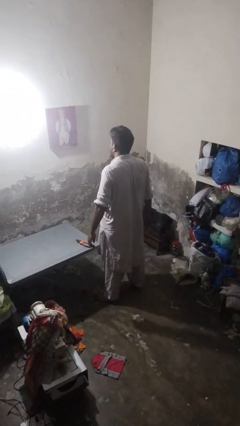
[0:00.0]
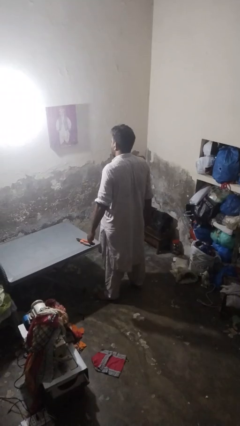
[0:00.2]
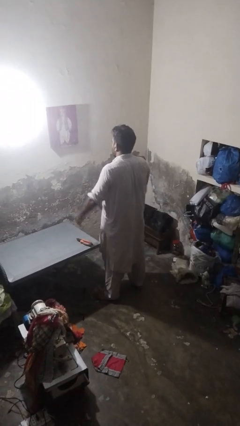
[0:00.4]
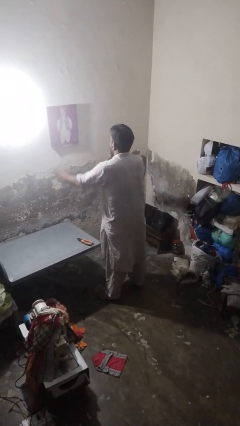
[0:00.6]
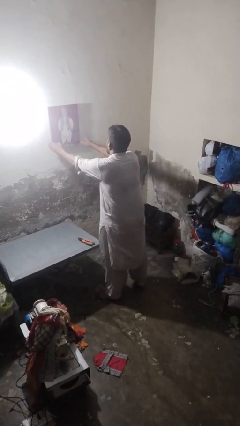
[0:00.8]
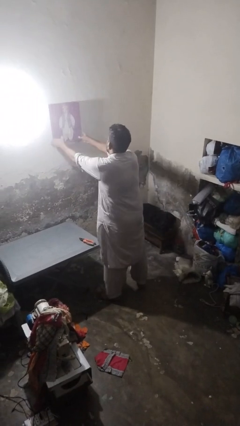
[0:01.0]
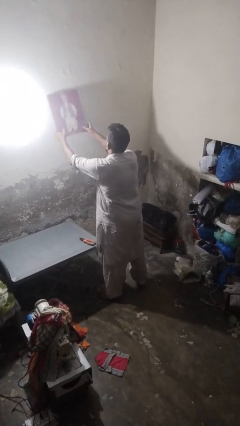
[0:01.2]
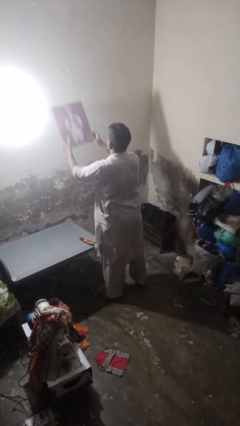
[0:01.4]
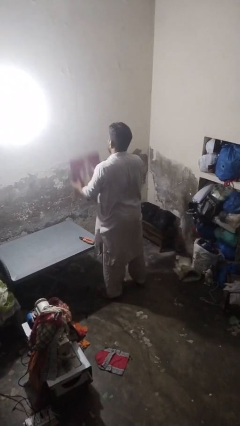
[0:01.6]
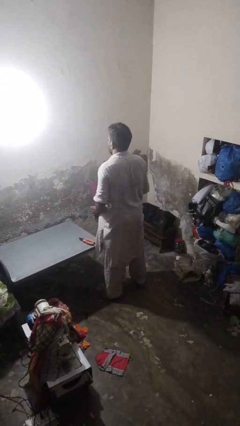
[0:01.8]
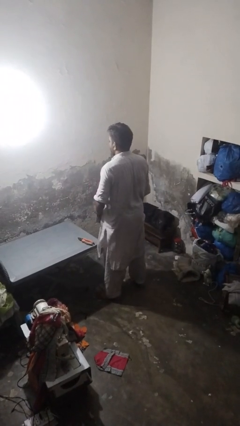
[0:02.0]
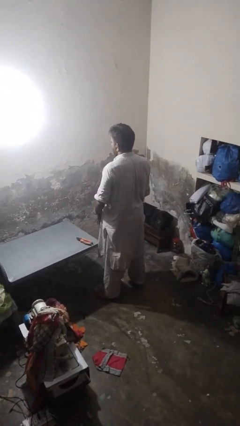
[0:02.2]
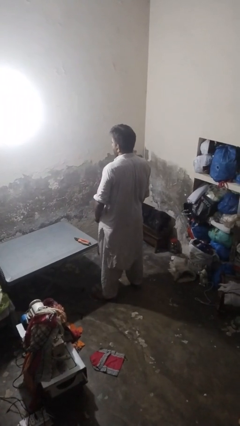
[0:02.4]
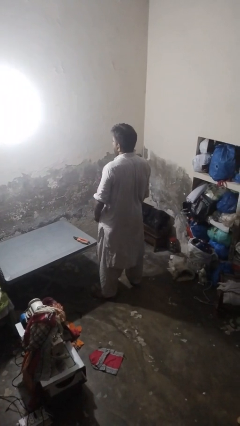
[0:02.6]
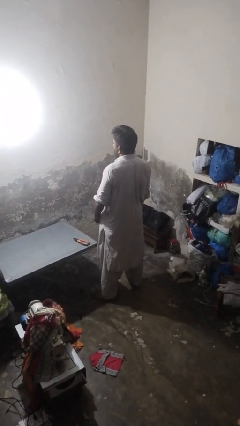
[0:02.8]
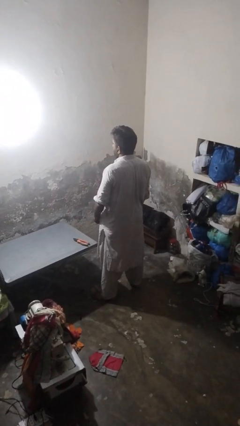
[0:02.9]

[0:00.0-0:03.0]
person takes down picture frame

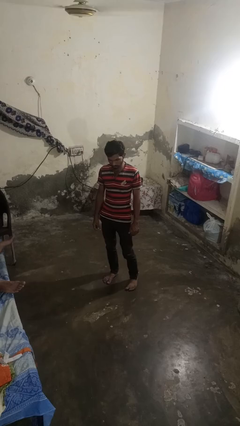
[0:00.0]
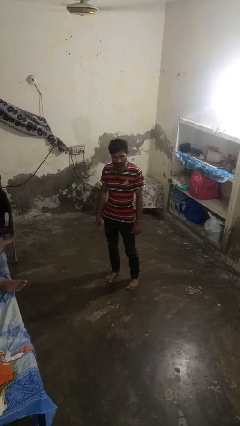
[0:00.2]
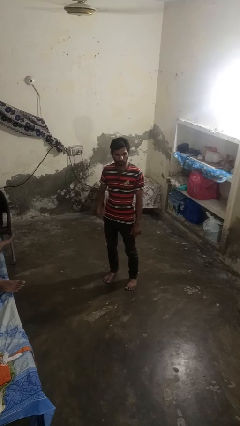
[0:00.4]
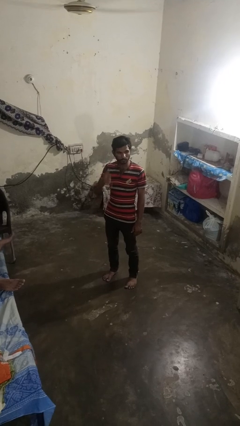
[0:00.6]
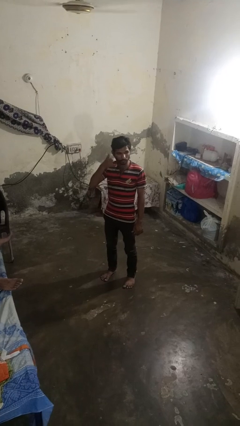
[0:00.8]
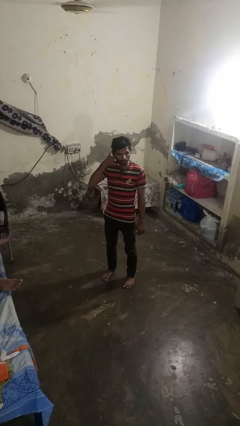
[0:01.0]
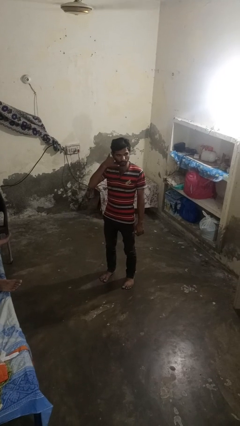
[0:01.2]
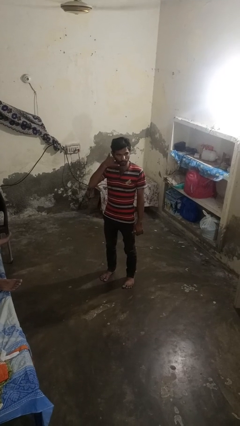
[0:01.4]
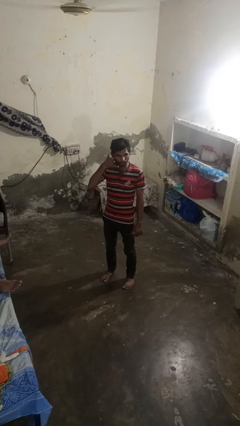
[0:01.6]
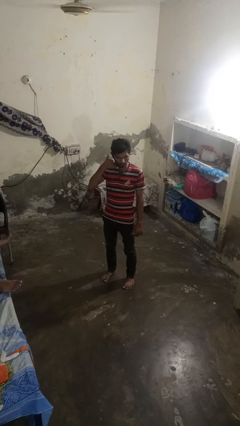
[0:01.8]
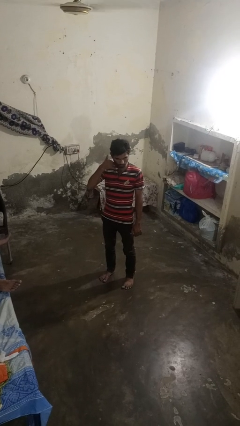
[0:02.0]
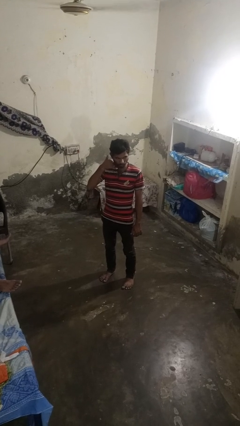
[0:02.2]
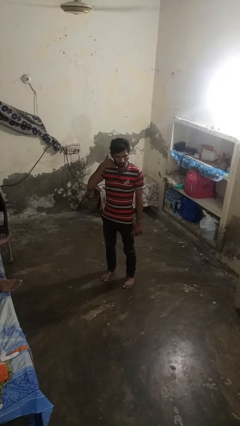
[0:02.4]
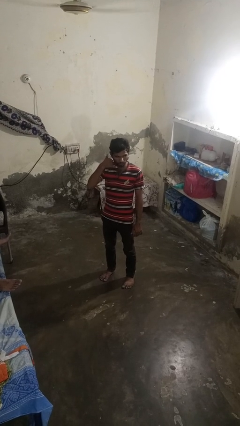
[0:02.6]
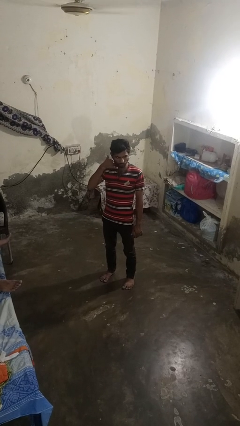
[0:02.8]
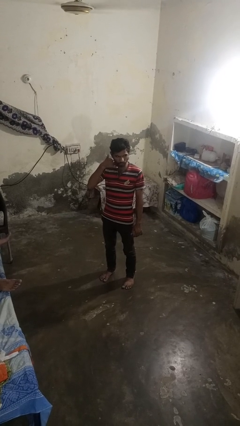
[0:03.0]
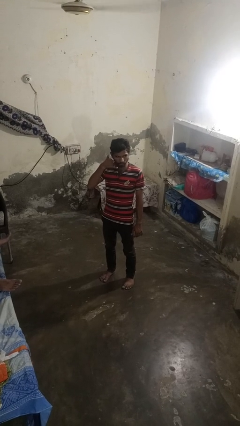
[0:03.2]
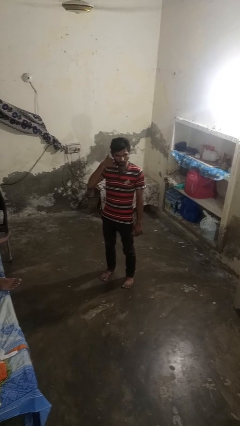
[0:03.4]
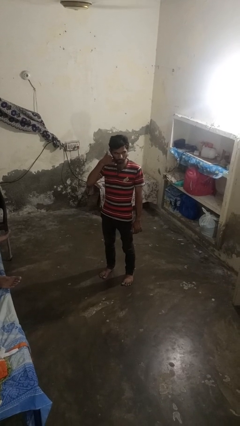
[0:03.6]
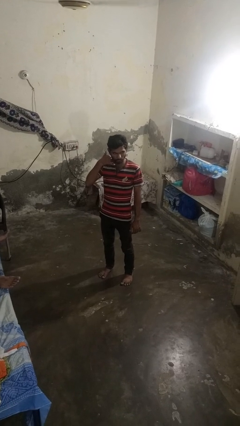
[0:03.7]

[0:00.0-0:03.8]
person gestures call me

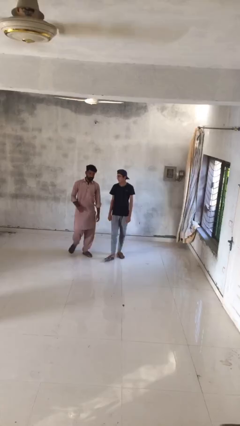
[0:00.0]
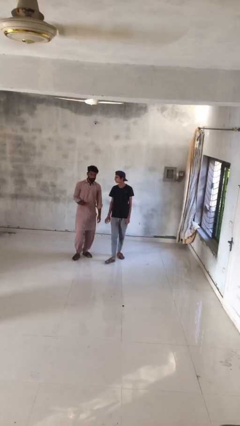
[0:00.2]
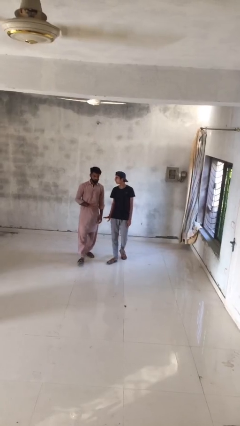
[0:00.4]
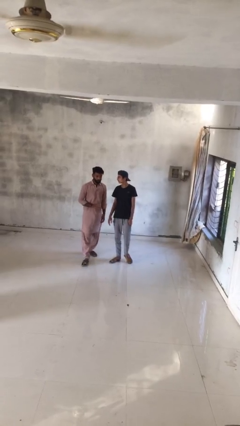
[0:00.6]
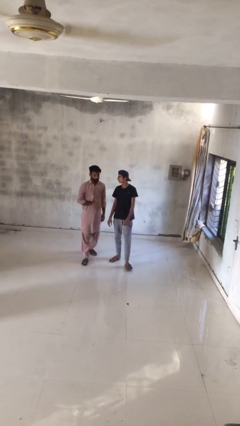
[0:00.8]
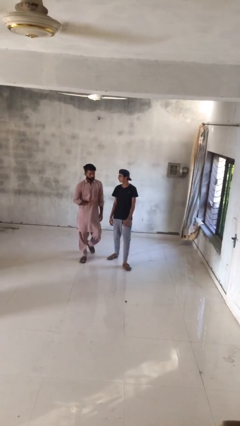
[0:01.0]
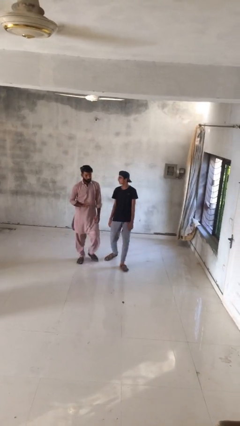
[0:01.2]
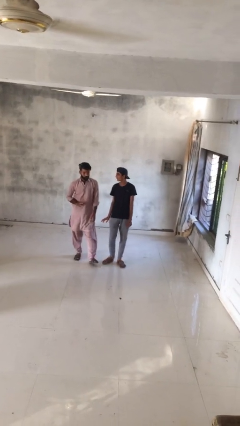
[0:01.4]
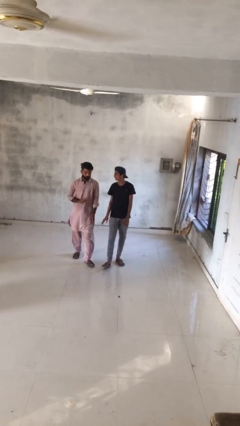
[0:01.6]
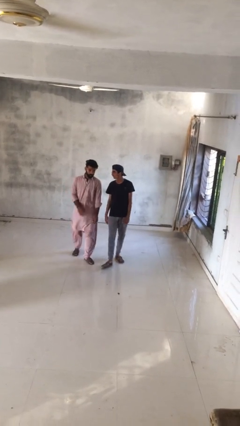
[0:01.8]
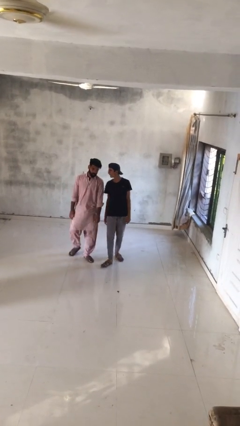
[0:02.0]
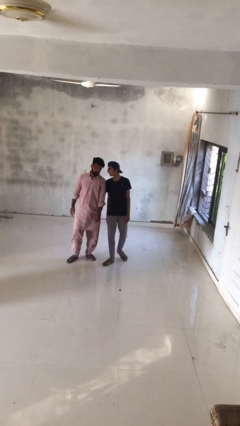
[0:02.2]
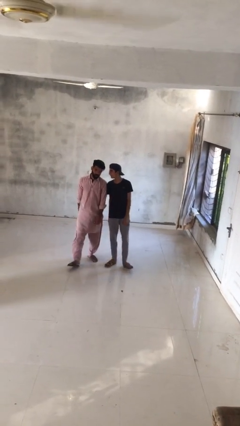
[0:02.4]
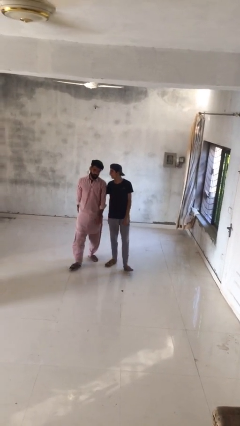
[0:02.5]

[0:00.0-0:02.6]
person talks to person

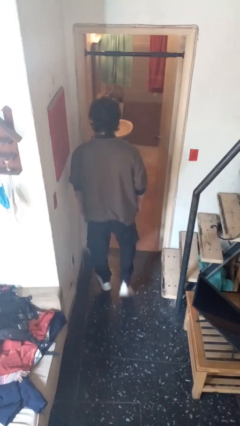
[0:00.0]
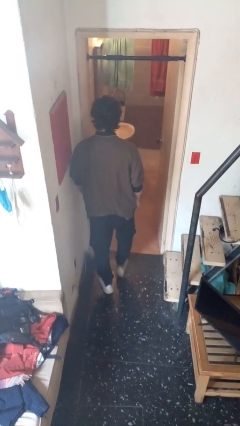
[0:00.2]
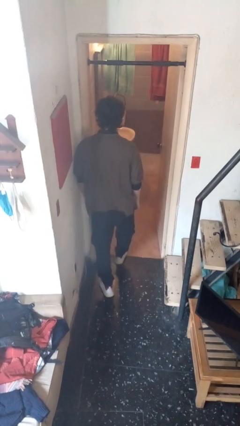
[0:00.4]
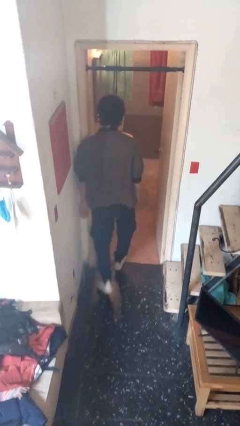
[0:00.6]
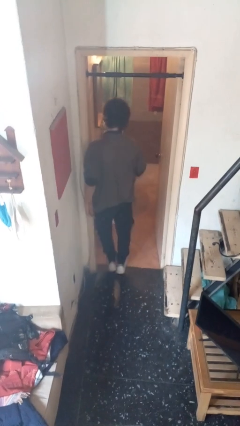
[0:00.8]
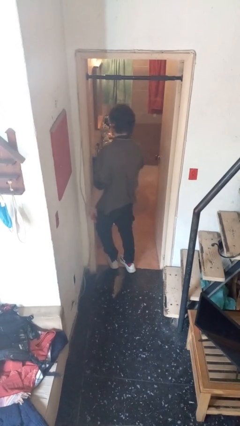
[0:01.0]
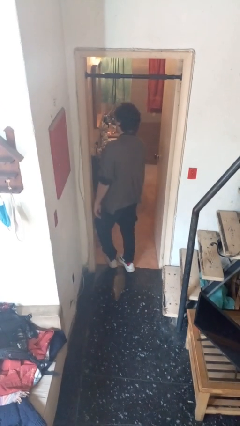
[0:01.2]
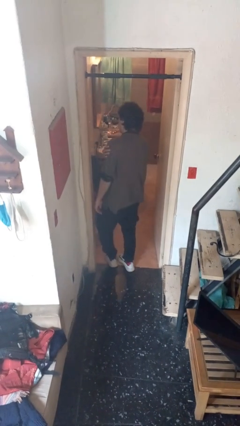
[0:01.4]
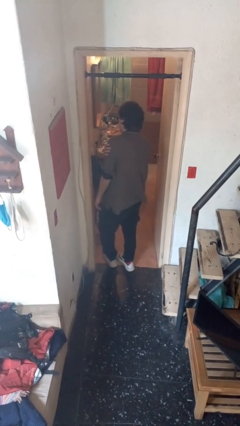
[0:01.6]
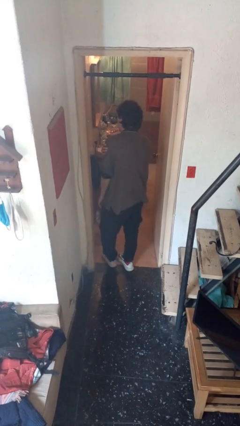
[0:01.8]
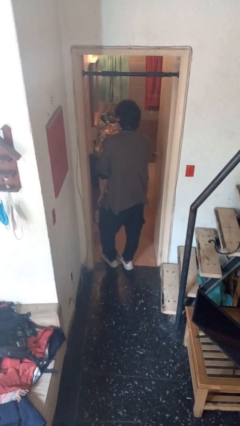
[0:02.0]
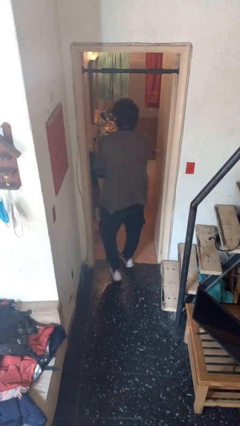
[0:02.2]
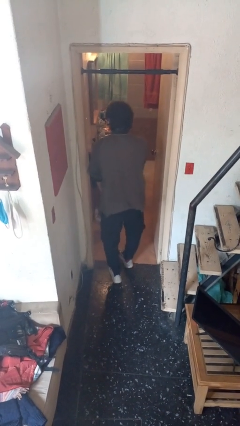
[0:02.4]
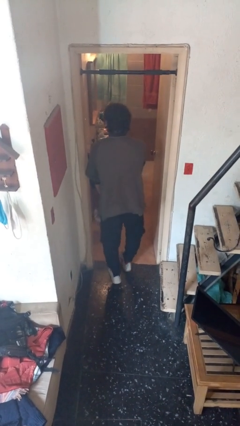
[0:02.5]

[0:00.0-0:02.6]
person bumps into wall

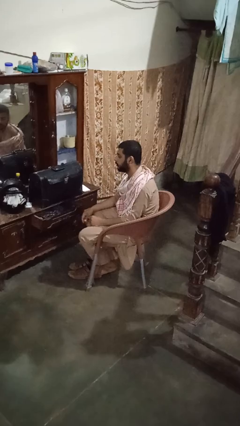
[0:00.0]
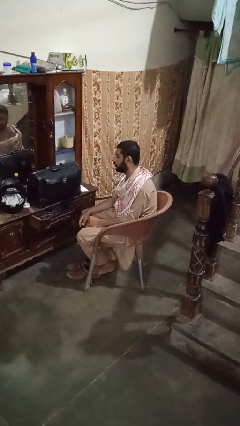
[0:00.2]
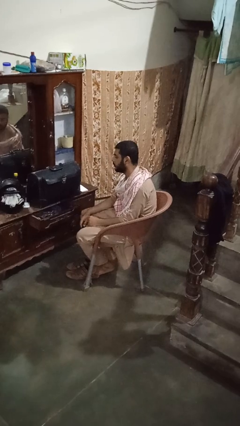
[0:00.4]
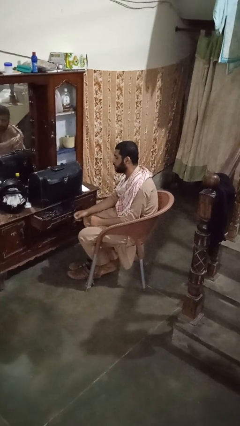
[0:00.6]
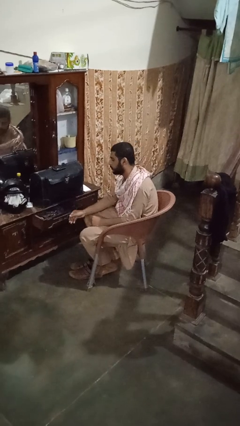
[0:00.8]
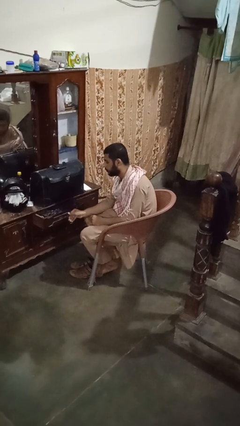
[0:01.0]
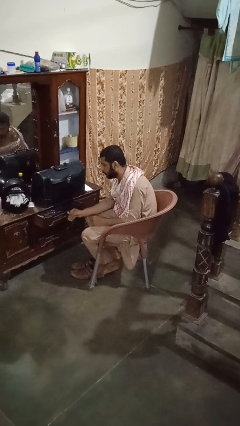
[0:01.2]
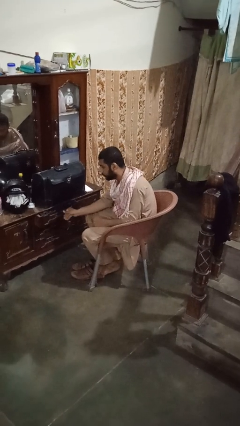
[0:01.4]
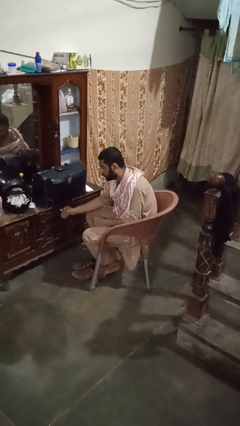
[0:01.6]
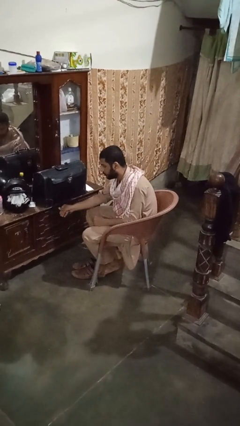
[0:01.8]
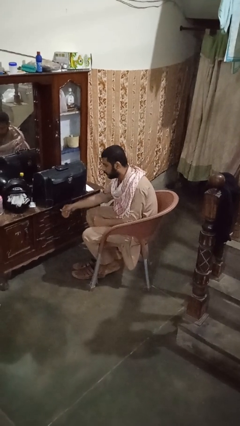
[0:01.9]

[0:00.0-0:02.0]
person closes dresser drawer

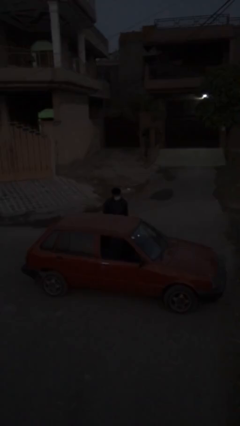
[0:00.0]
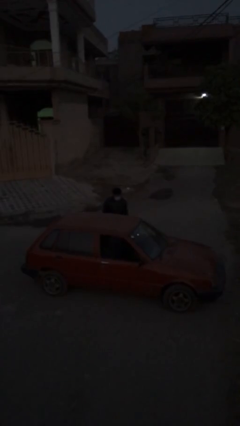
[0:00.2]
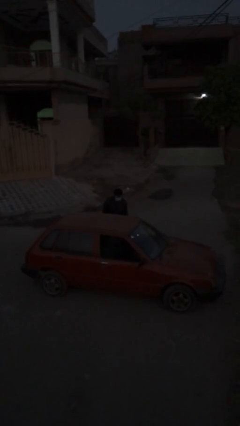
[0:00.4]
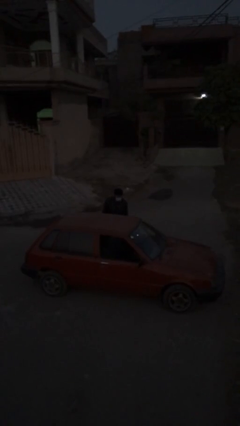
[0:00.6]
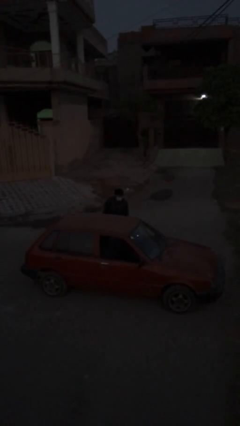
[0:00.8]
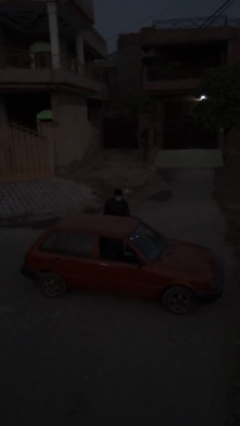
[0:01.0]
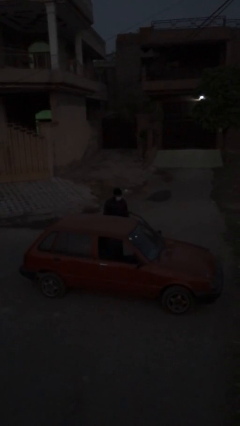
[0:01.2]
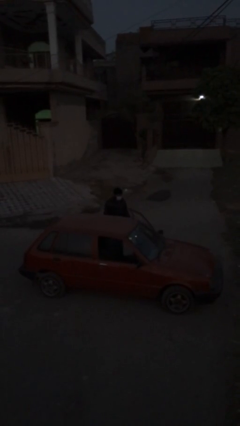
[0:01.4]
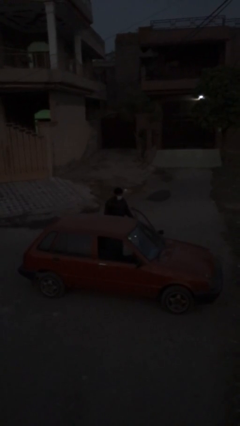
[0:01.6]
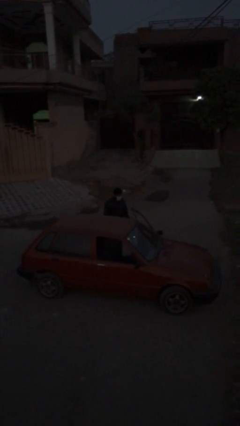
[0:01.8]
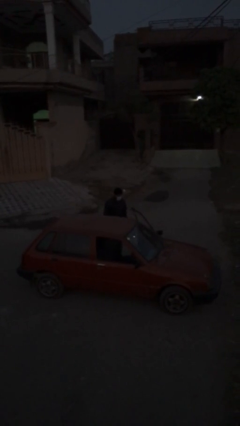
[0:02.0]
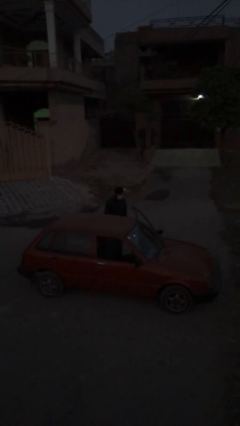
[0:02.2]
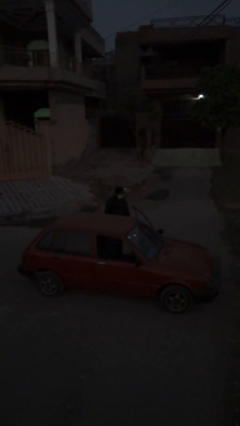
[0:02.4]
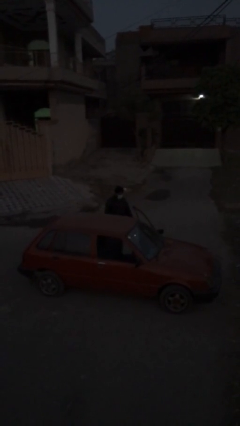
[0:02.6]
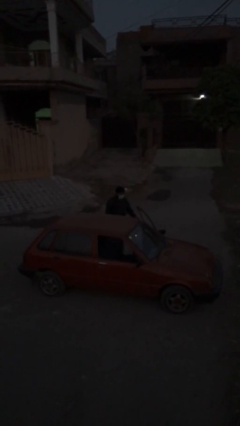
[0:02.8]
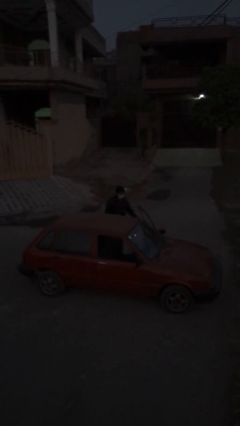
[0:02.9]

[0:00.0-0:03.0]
person opens car door

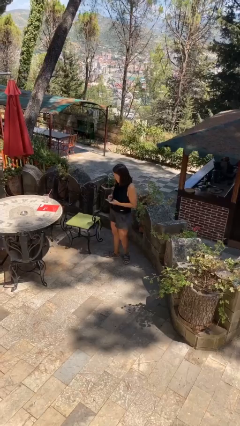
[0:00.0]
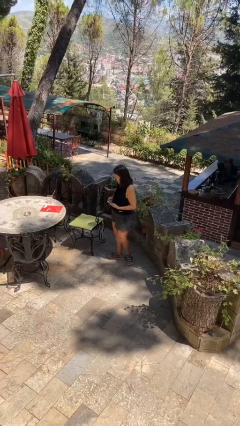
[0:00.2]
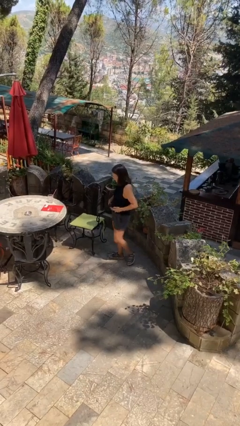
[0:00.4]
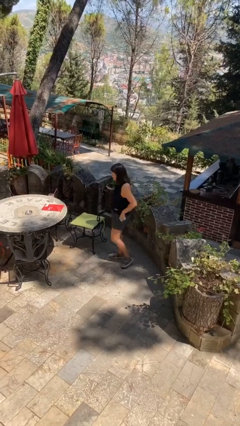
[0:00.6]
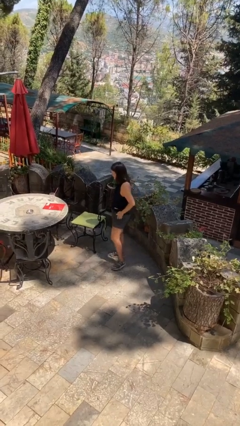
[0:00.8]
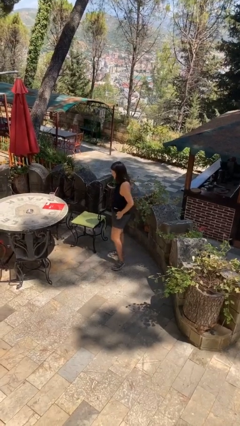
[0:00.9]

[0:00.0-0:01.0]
person puts phone into pocket
